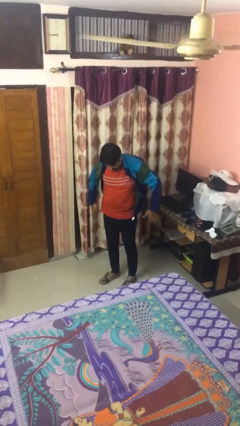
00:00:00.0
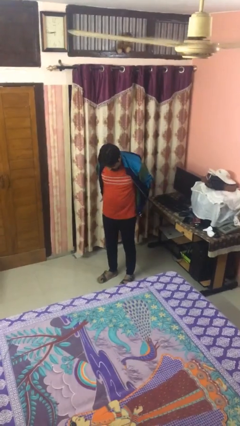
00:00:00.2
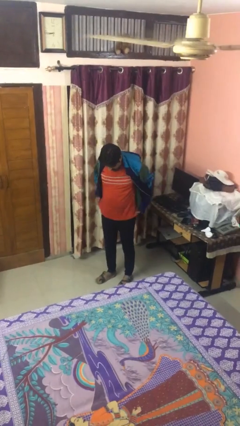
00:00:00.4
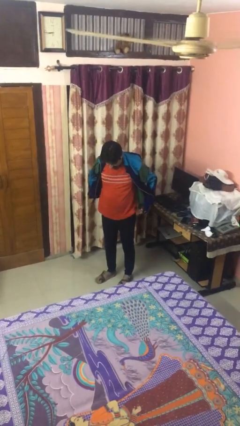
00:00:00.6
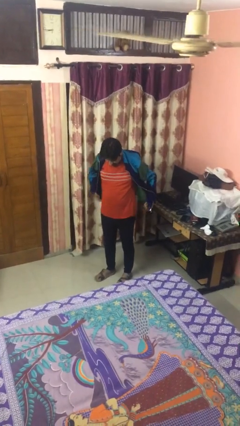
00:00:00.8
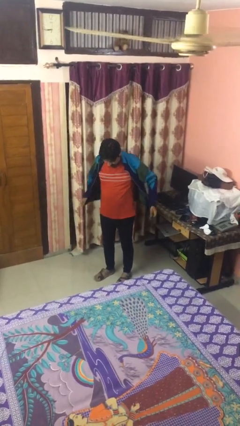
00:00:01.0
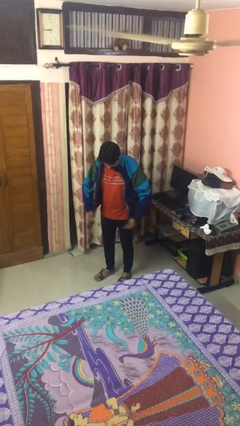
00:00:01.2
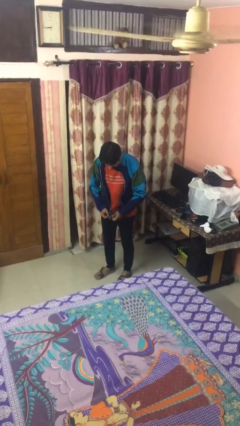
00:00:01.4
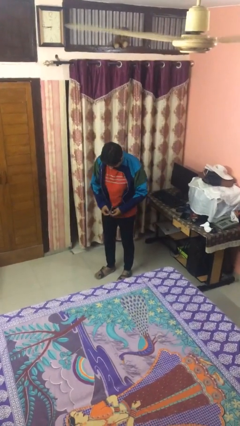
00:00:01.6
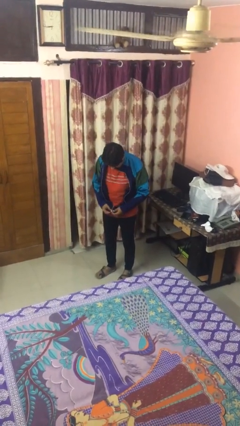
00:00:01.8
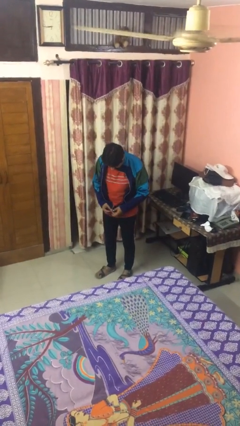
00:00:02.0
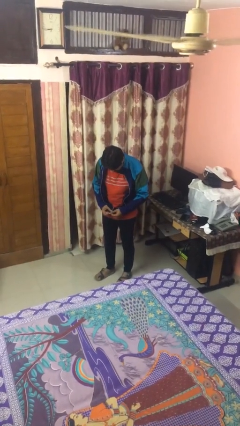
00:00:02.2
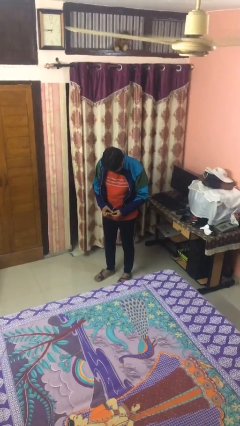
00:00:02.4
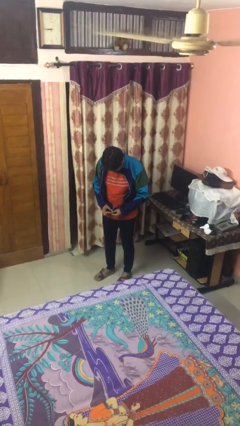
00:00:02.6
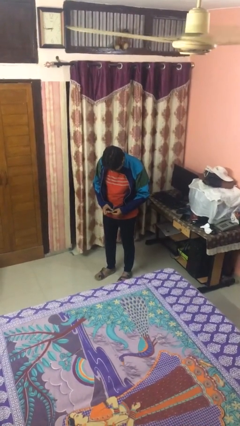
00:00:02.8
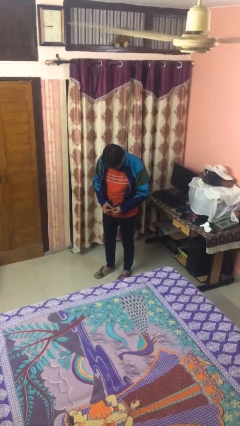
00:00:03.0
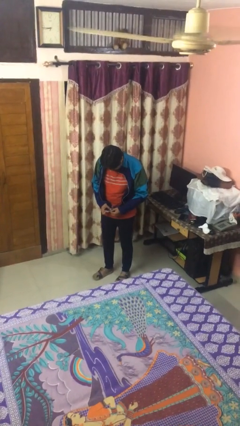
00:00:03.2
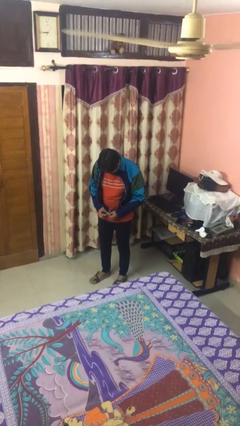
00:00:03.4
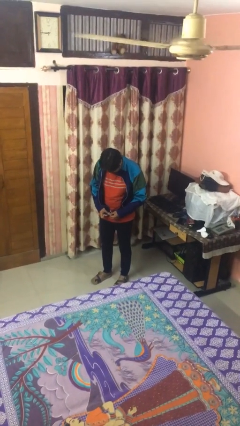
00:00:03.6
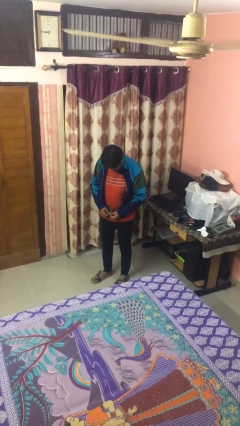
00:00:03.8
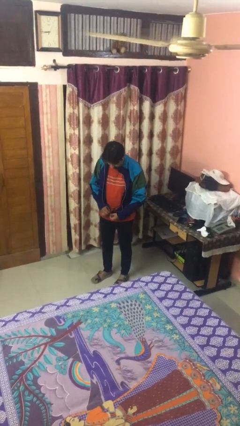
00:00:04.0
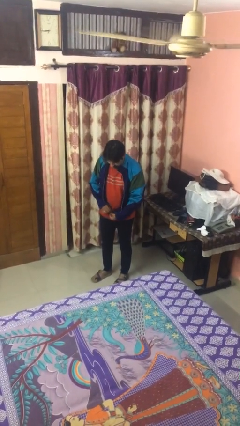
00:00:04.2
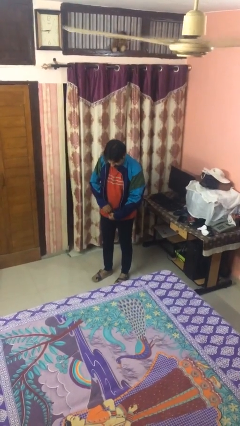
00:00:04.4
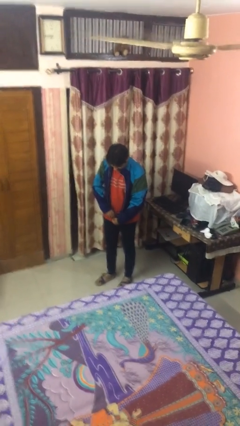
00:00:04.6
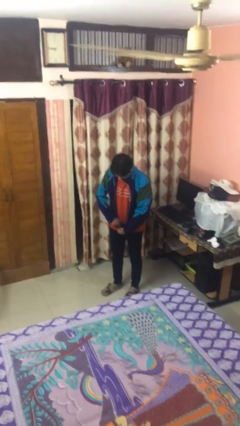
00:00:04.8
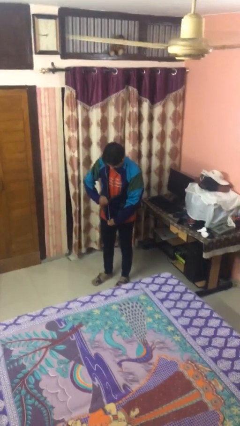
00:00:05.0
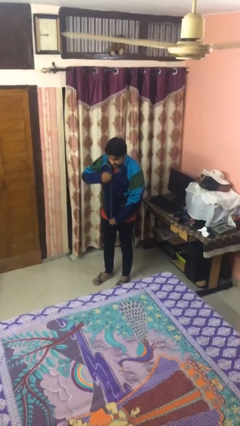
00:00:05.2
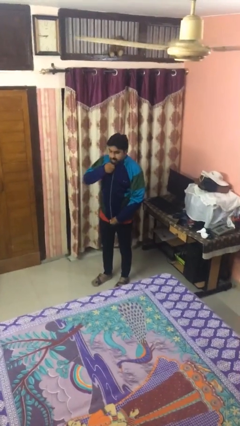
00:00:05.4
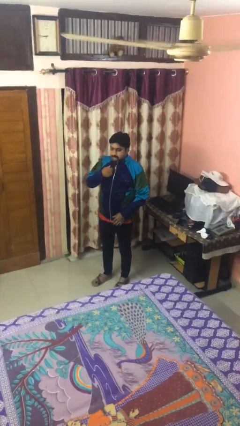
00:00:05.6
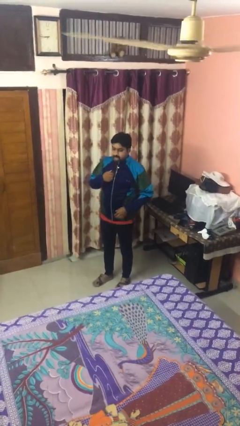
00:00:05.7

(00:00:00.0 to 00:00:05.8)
person zips up jacket

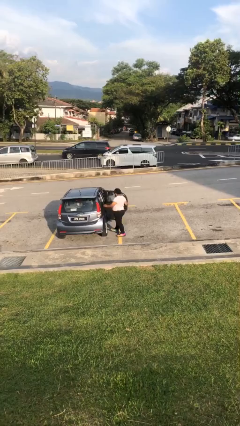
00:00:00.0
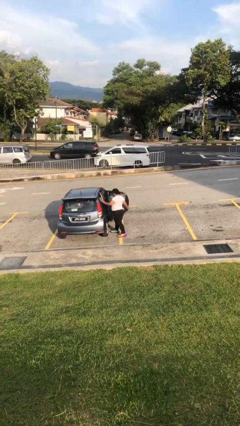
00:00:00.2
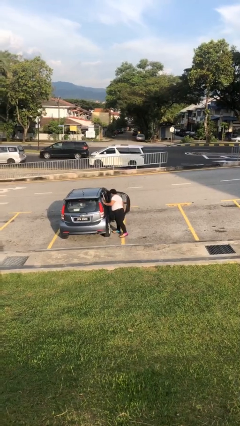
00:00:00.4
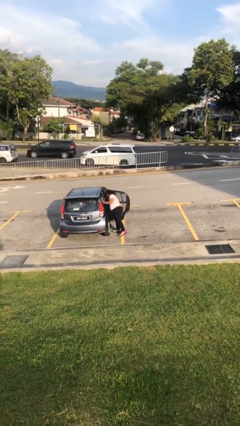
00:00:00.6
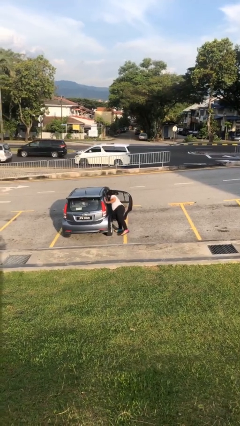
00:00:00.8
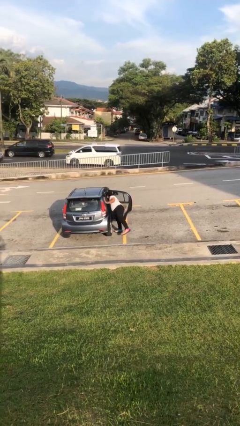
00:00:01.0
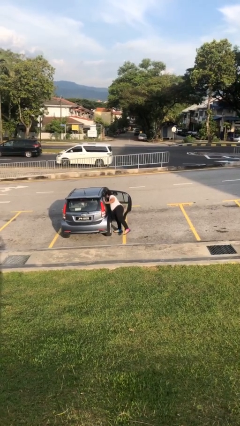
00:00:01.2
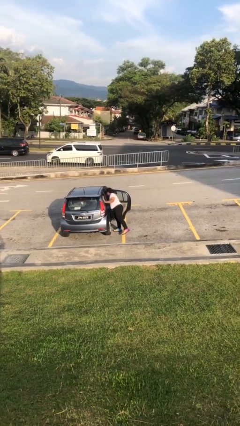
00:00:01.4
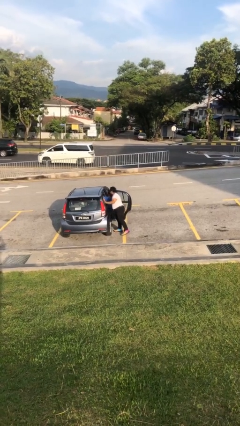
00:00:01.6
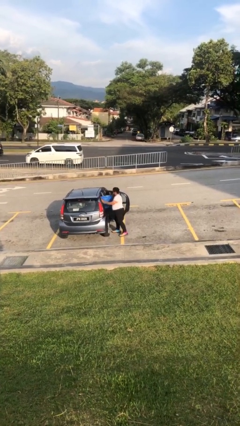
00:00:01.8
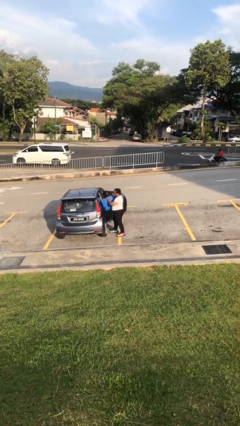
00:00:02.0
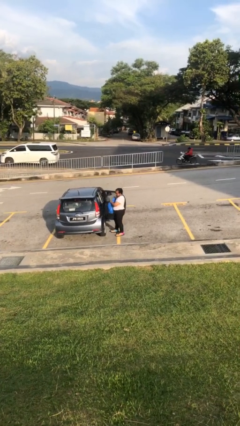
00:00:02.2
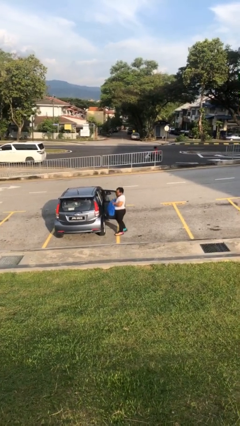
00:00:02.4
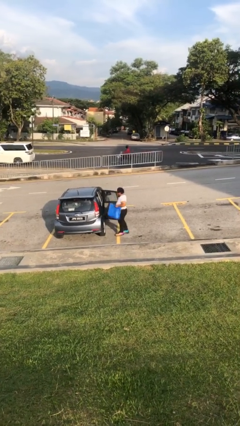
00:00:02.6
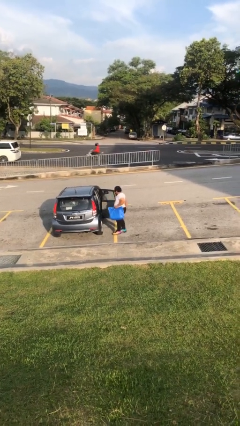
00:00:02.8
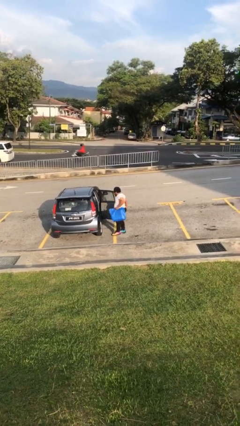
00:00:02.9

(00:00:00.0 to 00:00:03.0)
person unloads car

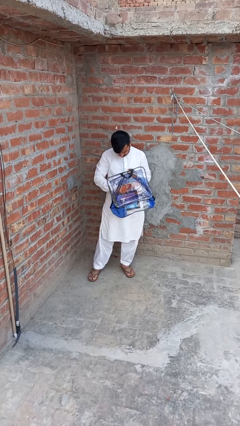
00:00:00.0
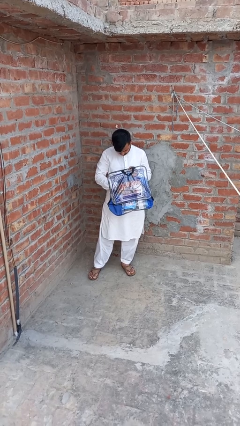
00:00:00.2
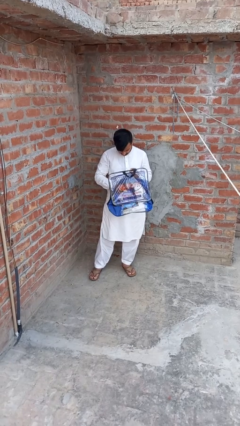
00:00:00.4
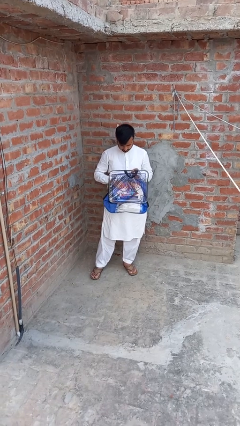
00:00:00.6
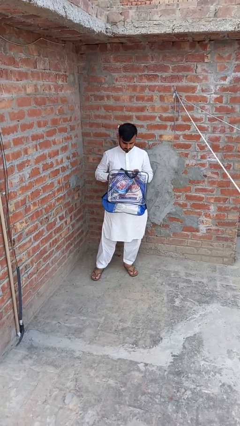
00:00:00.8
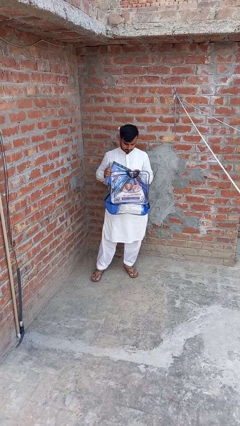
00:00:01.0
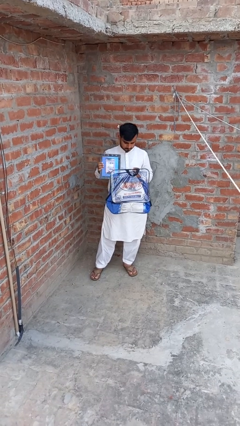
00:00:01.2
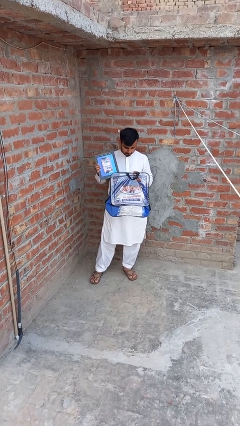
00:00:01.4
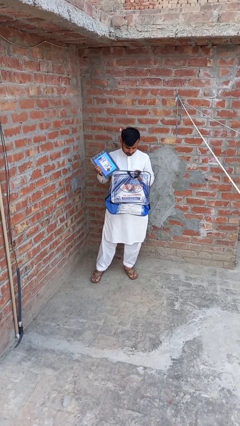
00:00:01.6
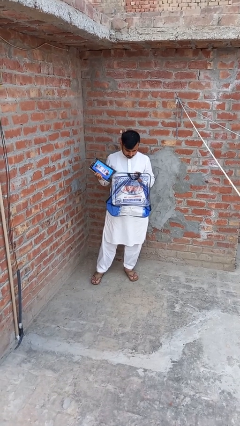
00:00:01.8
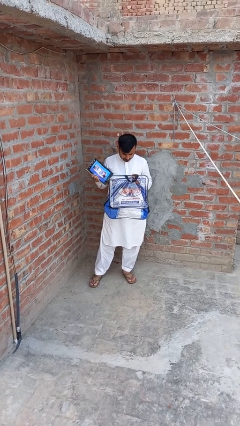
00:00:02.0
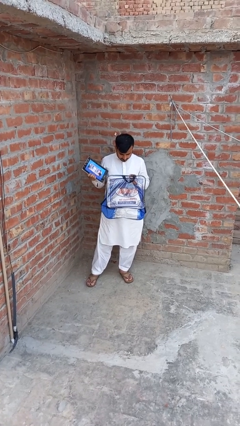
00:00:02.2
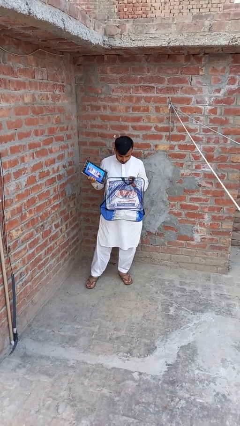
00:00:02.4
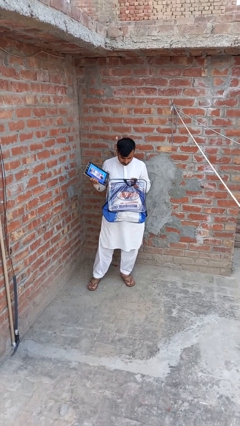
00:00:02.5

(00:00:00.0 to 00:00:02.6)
person takes object from backpack

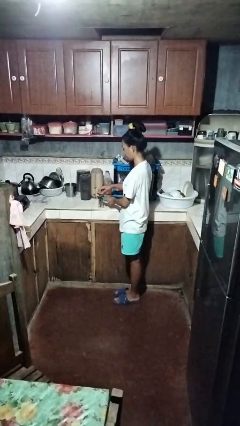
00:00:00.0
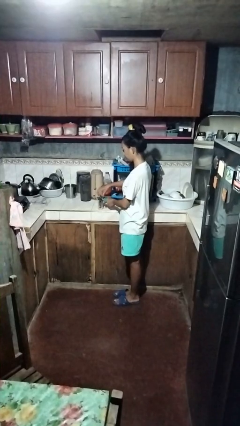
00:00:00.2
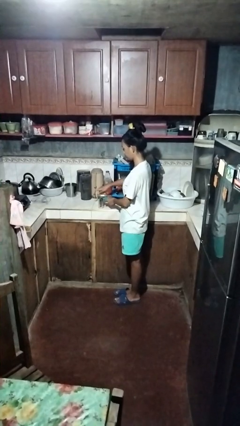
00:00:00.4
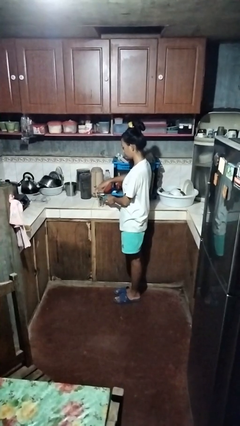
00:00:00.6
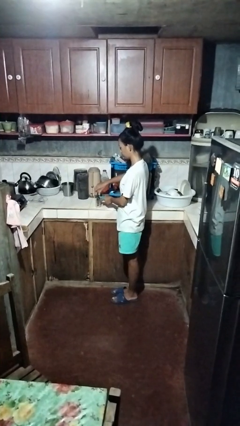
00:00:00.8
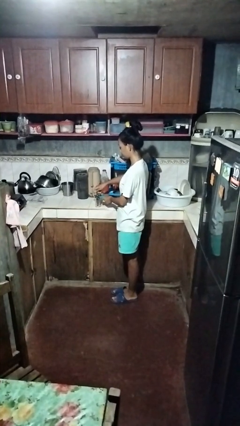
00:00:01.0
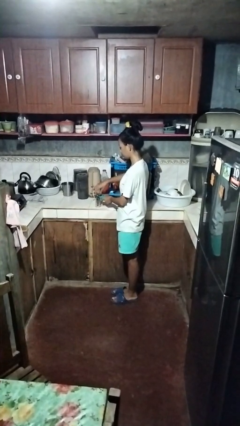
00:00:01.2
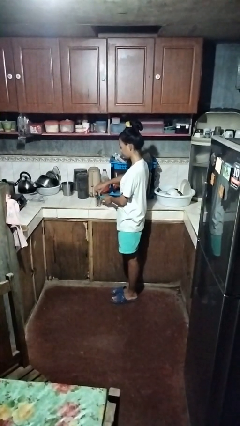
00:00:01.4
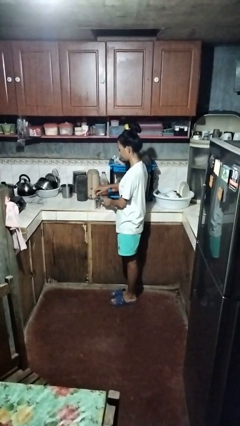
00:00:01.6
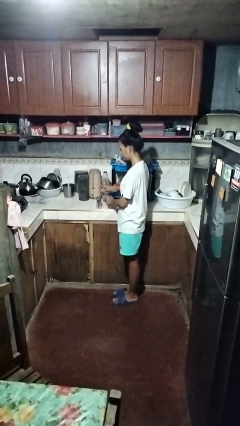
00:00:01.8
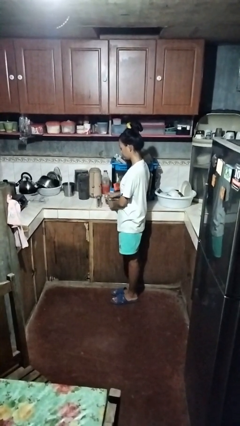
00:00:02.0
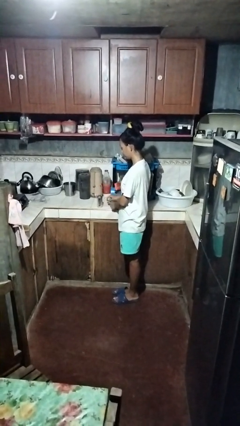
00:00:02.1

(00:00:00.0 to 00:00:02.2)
person opens can with can opener

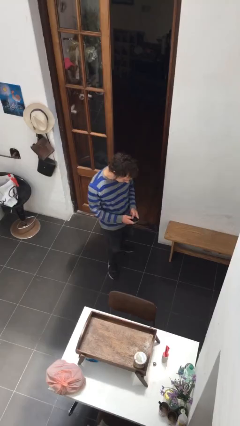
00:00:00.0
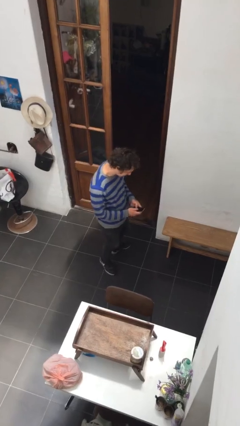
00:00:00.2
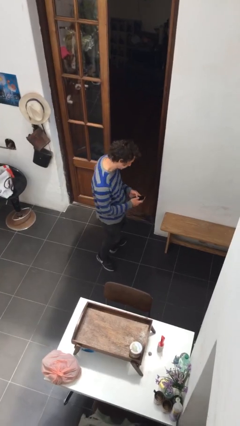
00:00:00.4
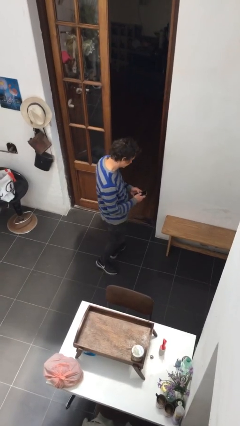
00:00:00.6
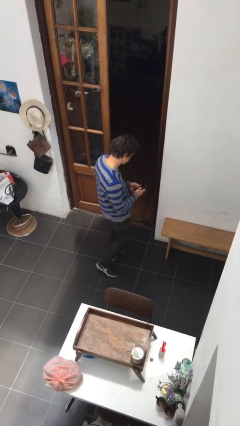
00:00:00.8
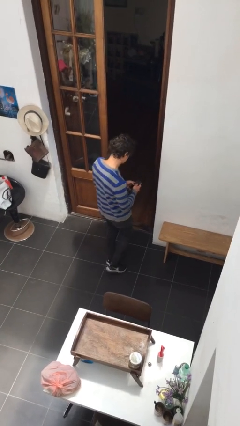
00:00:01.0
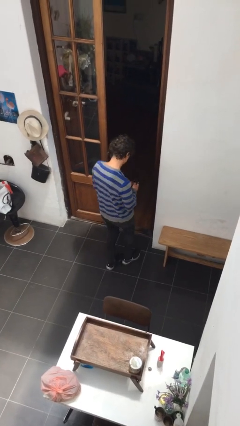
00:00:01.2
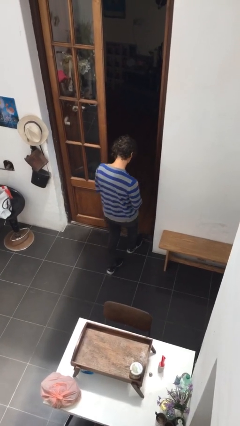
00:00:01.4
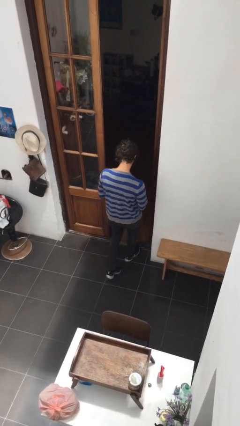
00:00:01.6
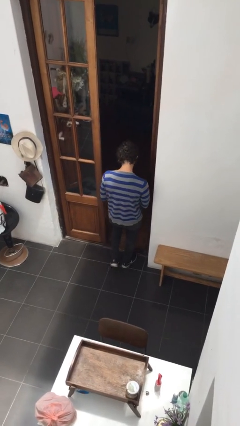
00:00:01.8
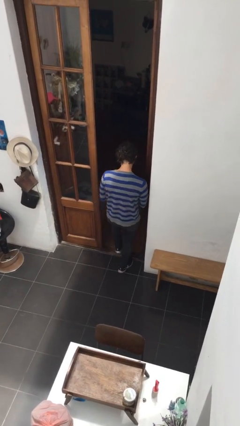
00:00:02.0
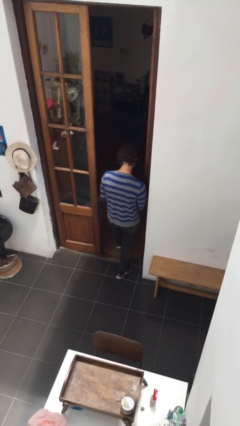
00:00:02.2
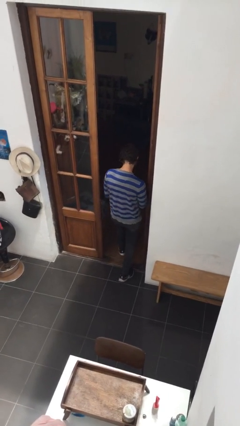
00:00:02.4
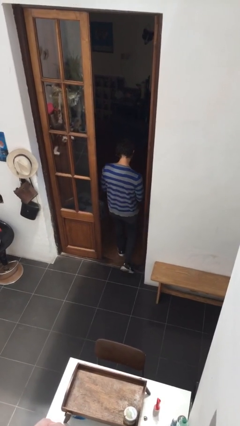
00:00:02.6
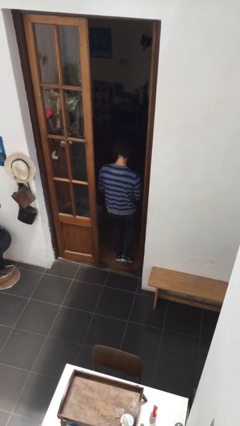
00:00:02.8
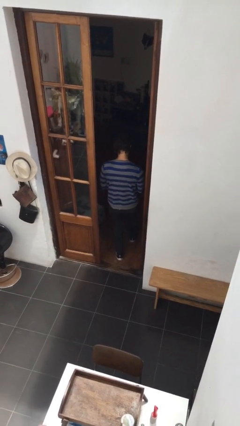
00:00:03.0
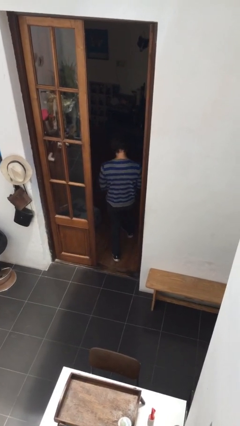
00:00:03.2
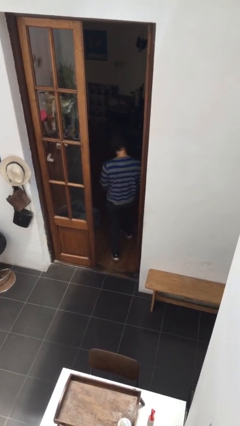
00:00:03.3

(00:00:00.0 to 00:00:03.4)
person exits scene through structure

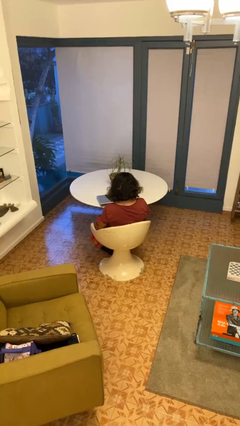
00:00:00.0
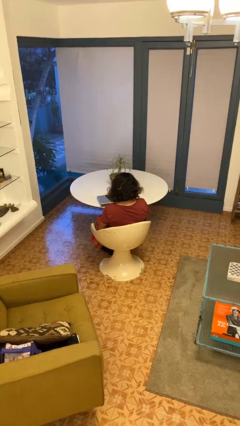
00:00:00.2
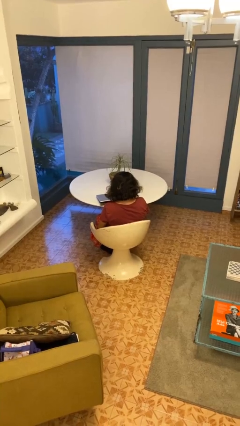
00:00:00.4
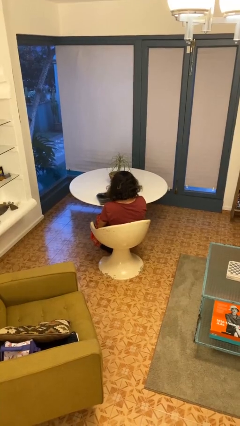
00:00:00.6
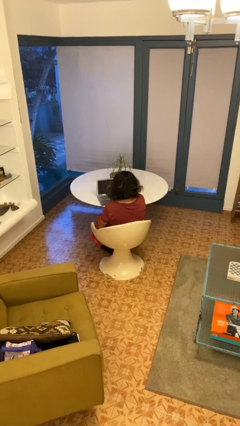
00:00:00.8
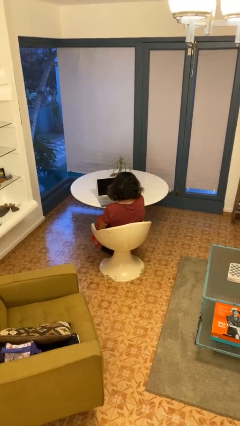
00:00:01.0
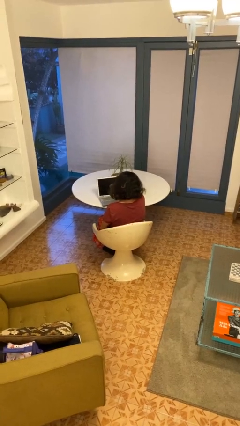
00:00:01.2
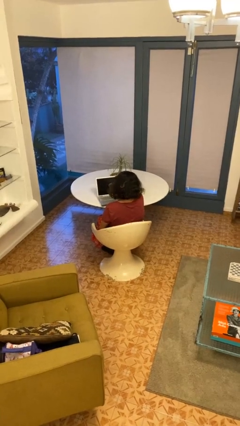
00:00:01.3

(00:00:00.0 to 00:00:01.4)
person opens laptop
